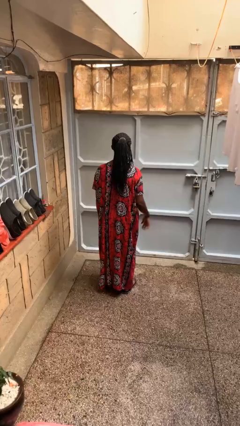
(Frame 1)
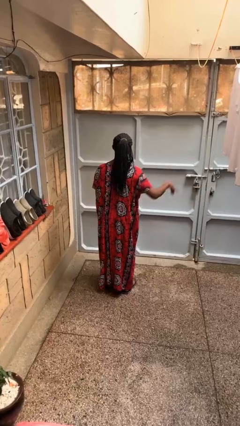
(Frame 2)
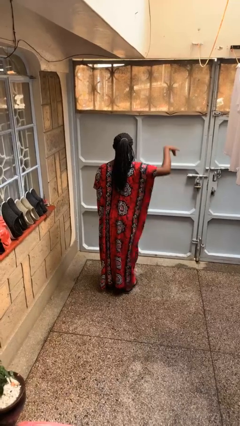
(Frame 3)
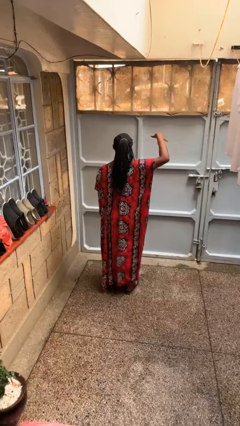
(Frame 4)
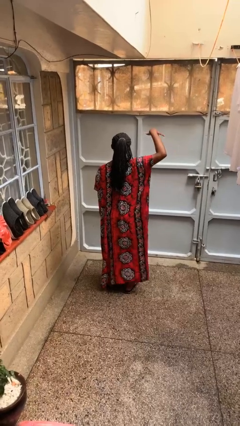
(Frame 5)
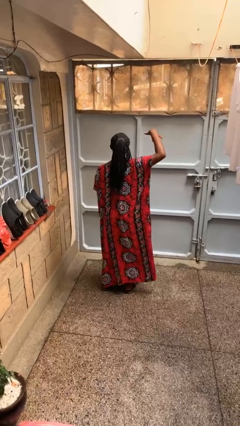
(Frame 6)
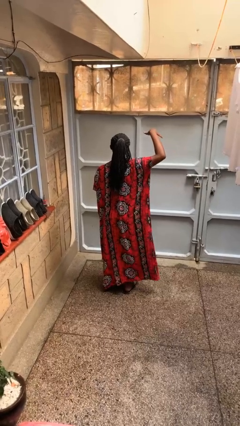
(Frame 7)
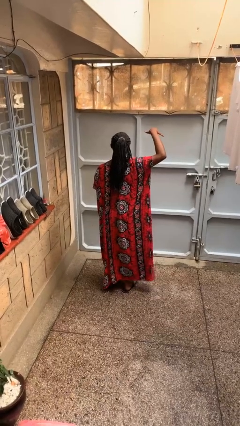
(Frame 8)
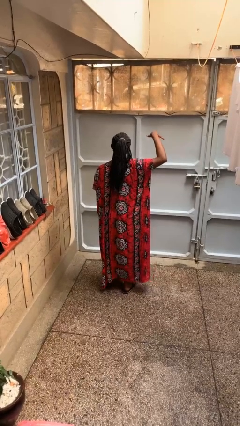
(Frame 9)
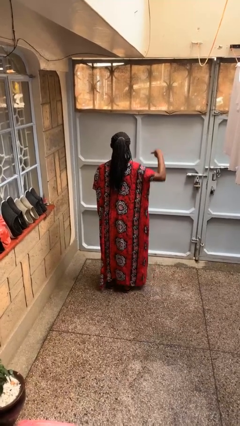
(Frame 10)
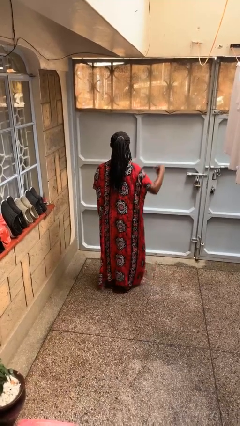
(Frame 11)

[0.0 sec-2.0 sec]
person gestures hang loose

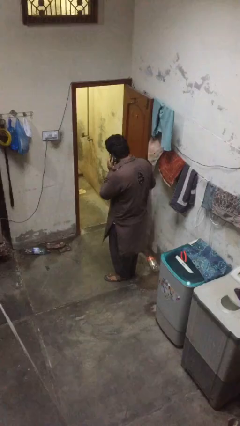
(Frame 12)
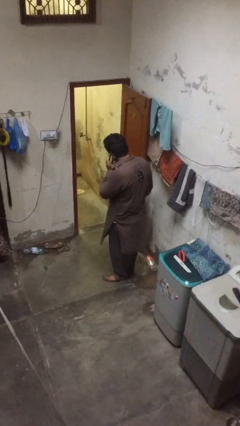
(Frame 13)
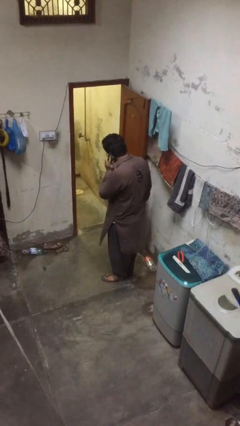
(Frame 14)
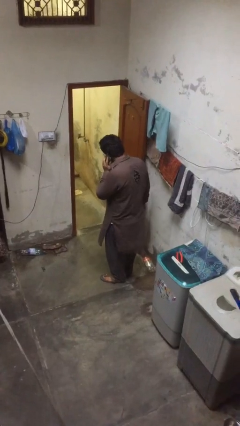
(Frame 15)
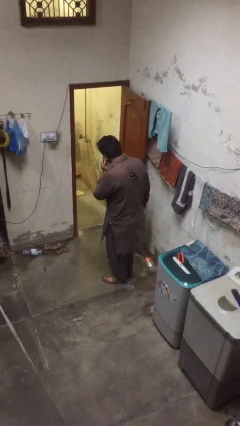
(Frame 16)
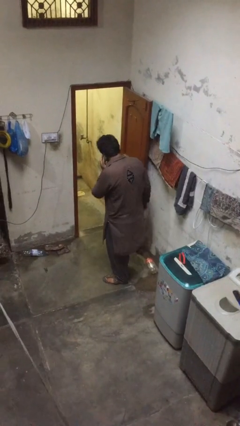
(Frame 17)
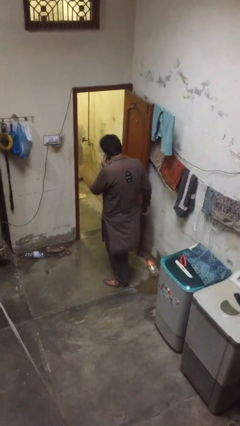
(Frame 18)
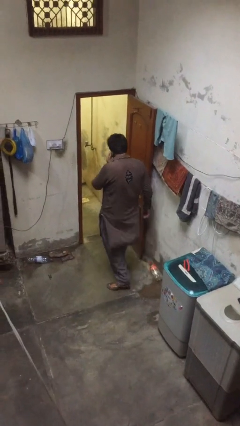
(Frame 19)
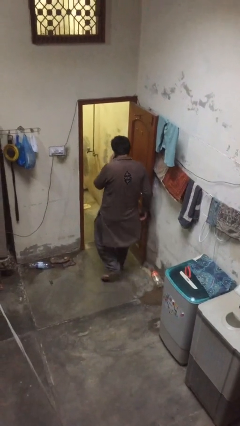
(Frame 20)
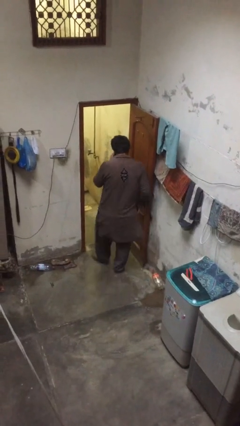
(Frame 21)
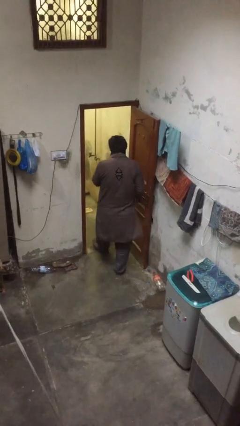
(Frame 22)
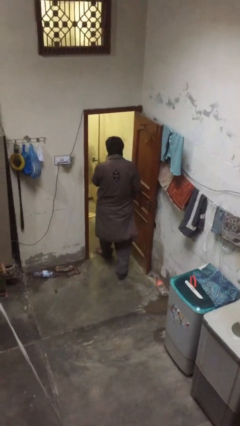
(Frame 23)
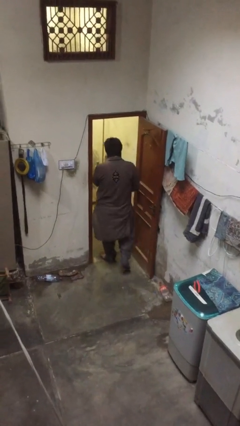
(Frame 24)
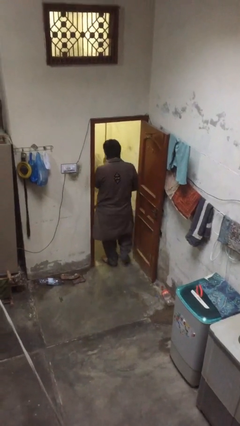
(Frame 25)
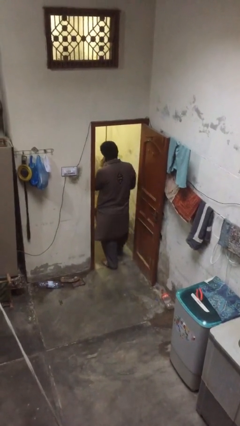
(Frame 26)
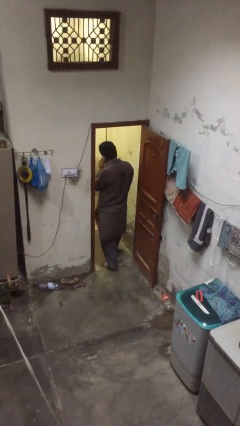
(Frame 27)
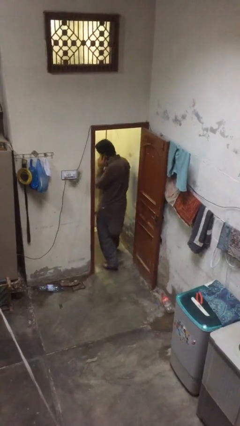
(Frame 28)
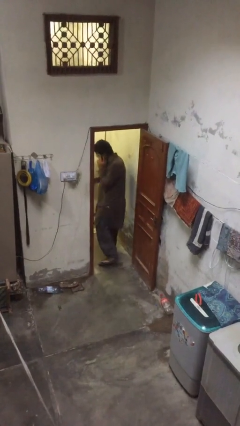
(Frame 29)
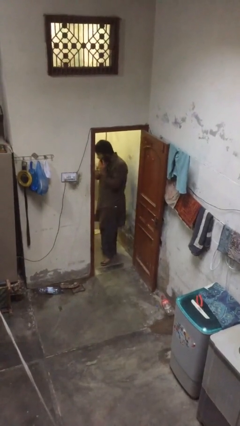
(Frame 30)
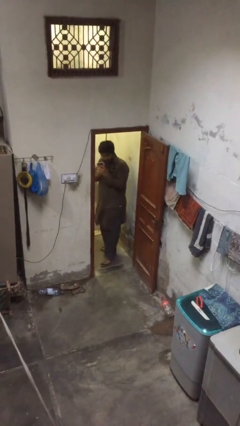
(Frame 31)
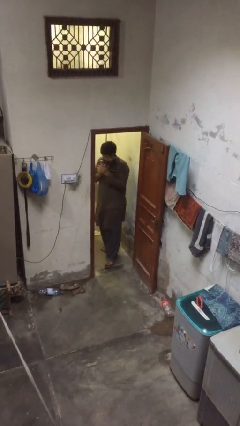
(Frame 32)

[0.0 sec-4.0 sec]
person exits scene through structure

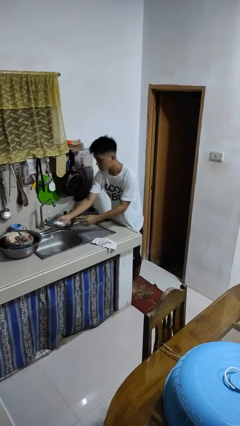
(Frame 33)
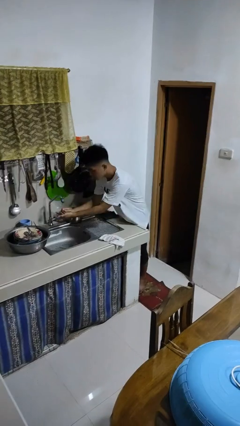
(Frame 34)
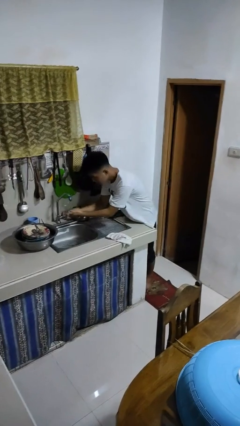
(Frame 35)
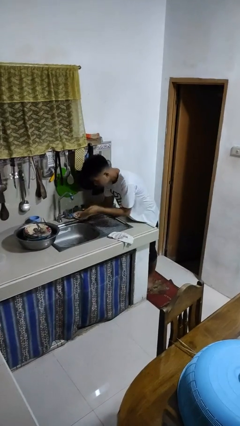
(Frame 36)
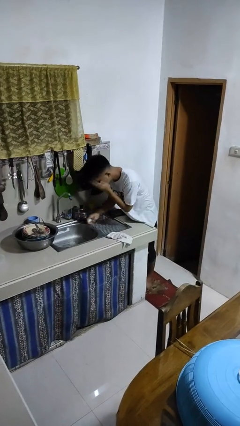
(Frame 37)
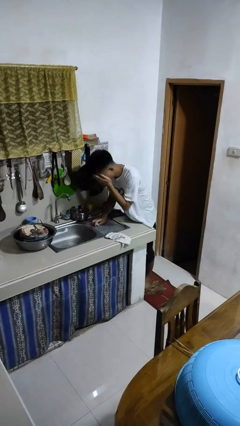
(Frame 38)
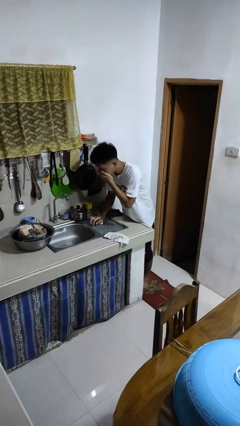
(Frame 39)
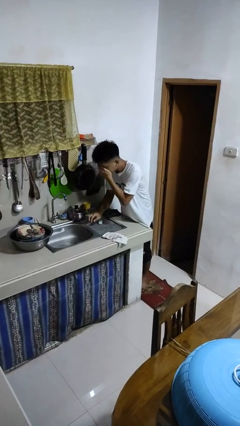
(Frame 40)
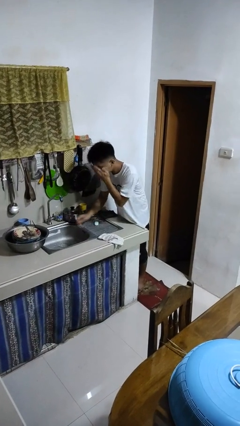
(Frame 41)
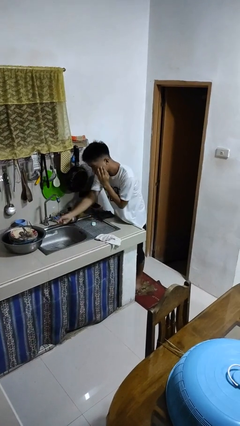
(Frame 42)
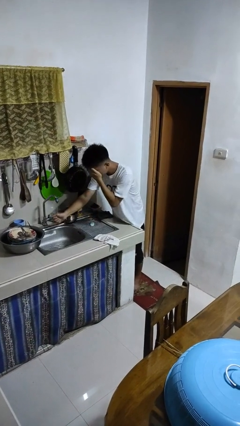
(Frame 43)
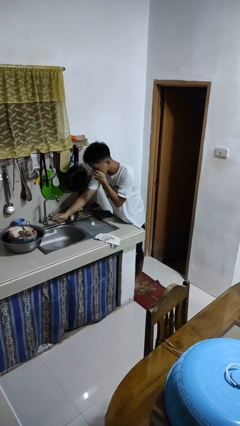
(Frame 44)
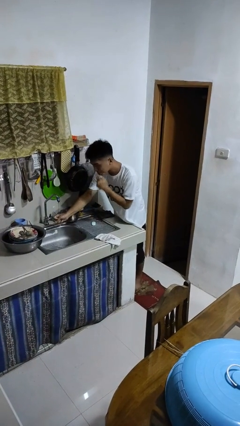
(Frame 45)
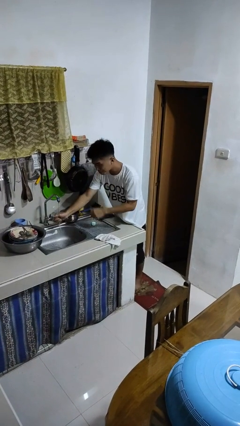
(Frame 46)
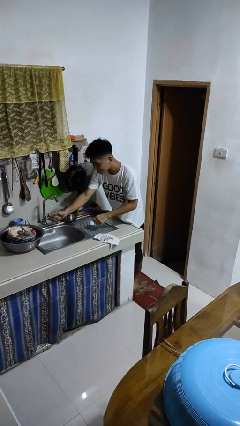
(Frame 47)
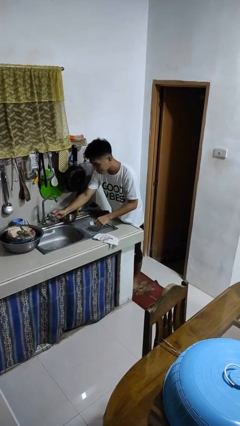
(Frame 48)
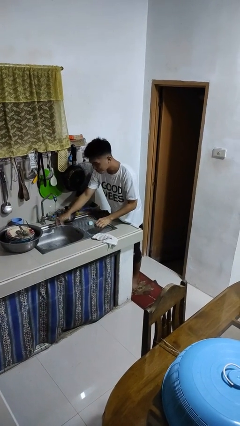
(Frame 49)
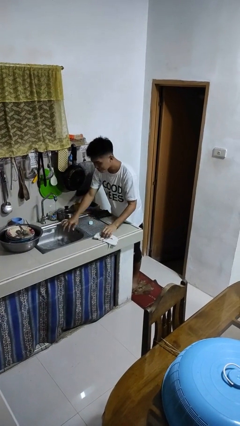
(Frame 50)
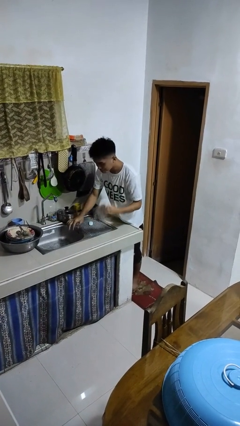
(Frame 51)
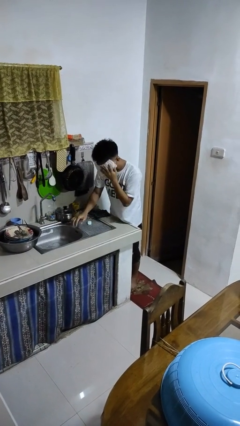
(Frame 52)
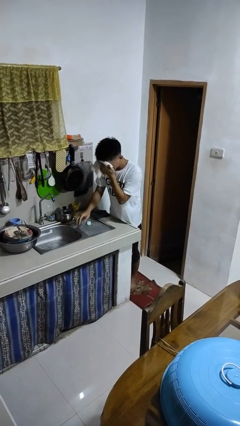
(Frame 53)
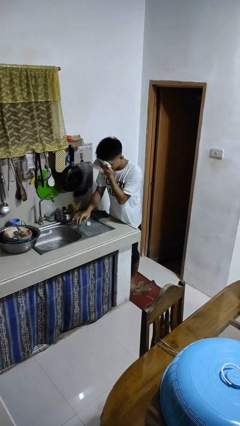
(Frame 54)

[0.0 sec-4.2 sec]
person washes face

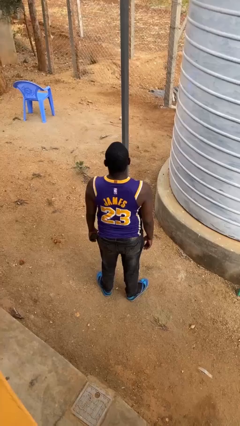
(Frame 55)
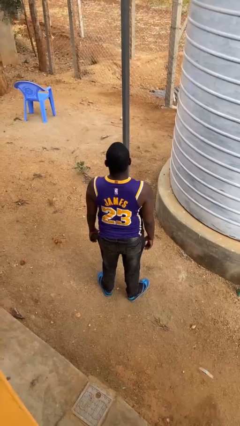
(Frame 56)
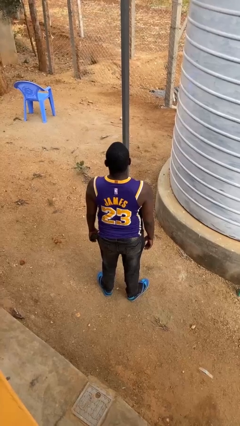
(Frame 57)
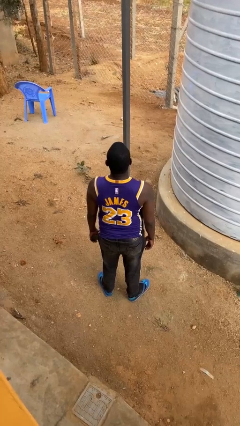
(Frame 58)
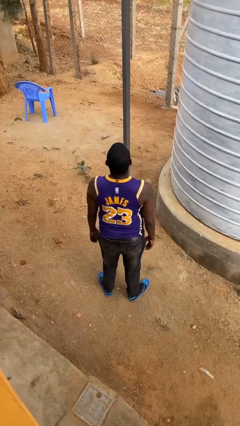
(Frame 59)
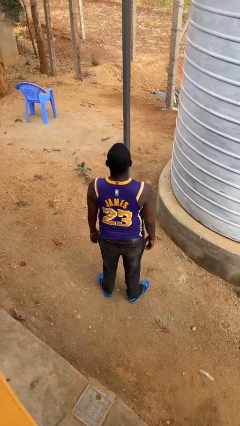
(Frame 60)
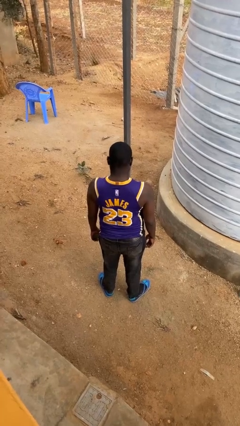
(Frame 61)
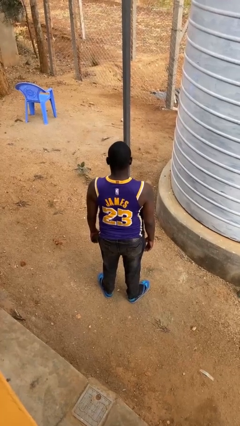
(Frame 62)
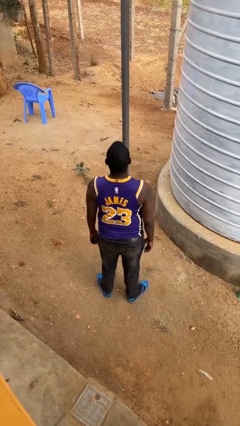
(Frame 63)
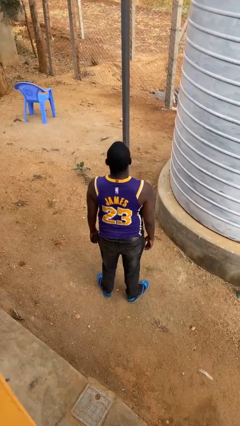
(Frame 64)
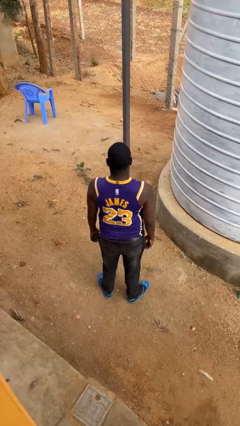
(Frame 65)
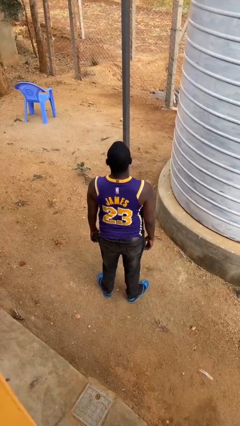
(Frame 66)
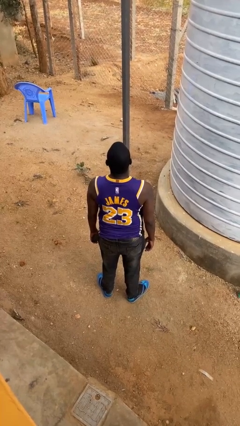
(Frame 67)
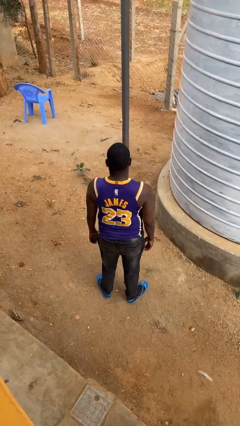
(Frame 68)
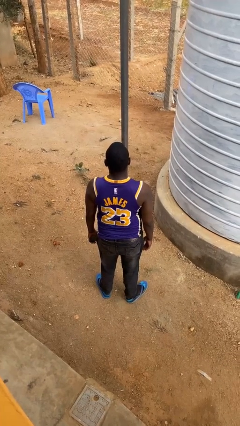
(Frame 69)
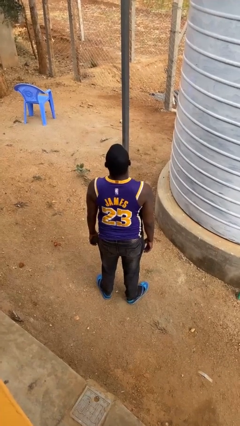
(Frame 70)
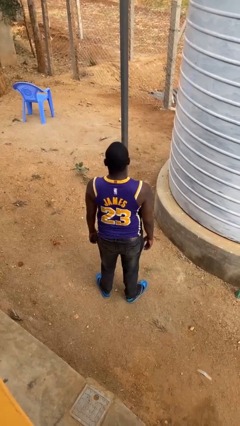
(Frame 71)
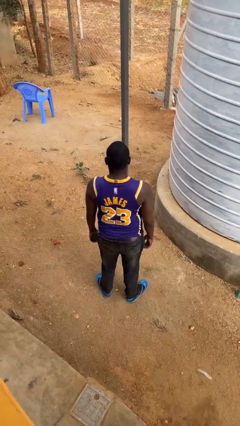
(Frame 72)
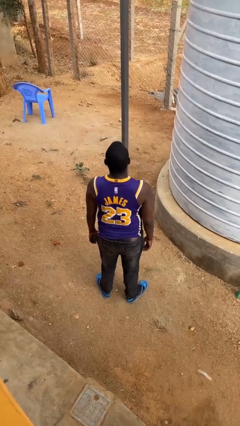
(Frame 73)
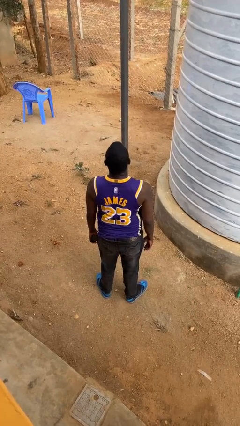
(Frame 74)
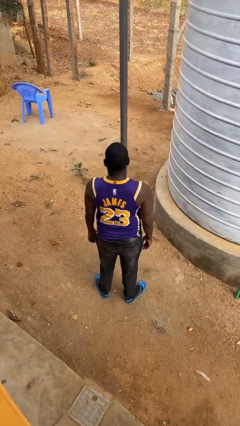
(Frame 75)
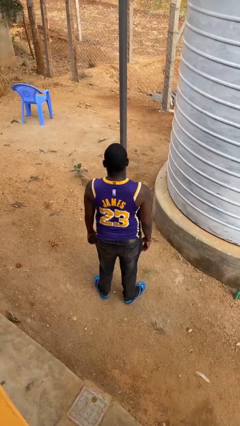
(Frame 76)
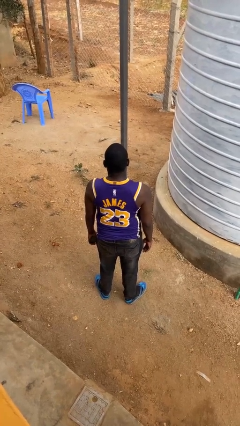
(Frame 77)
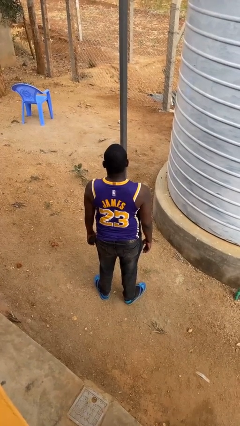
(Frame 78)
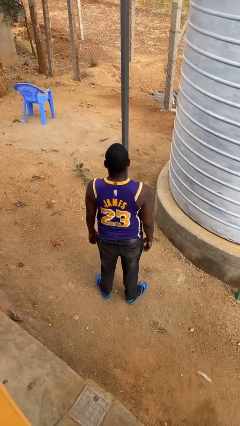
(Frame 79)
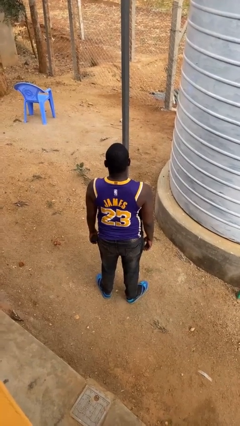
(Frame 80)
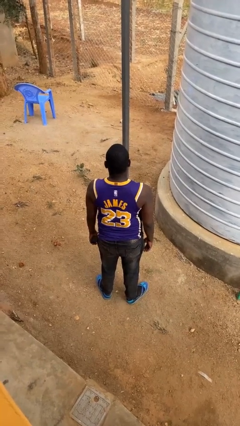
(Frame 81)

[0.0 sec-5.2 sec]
person nods head

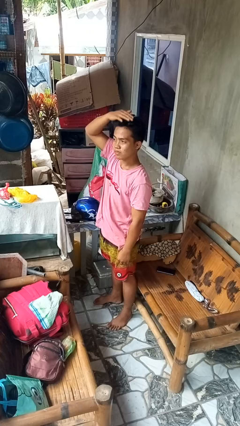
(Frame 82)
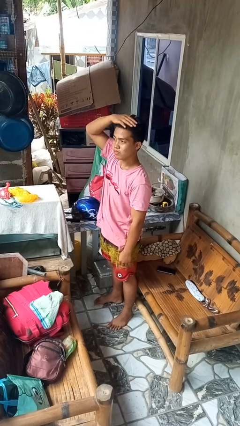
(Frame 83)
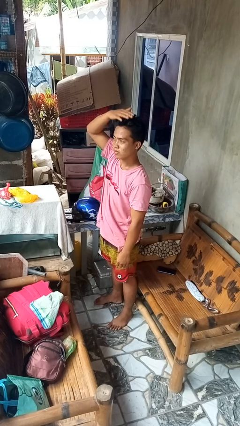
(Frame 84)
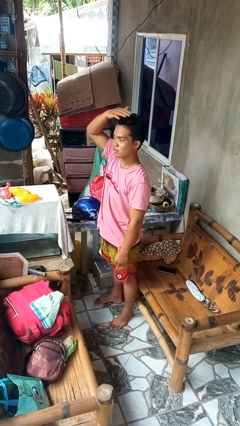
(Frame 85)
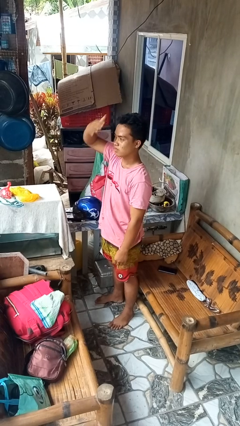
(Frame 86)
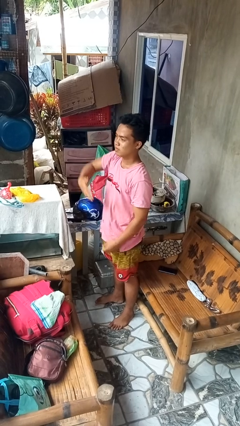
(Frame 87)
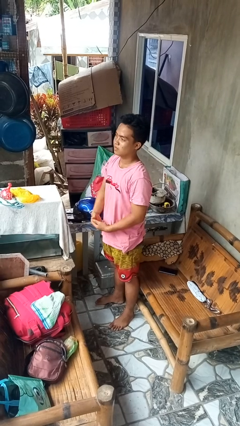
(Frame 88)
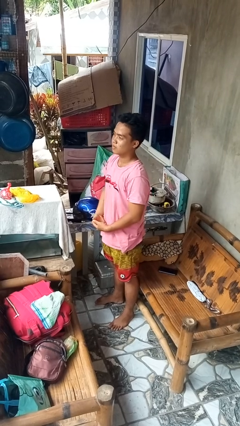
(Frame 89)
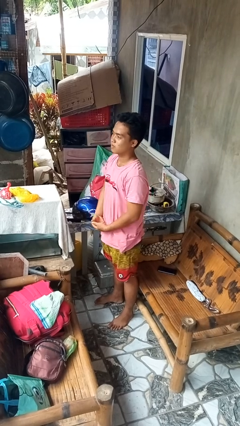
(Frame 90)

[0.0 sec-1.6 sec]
person pats head

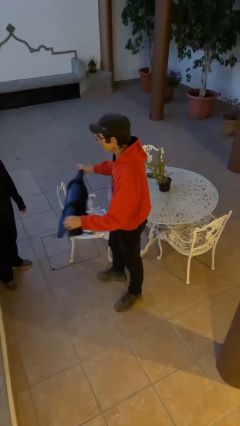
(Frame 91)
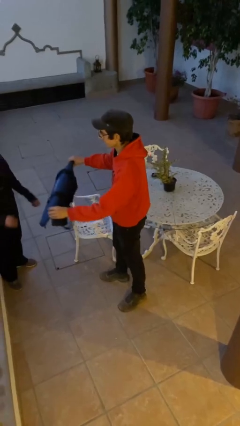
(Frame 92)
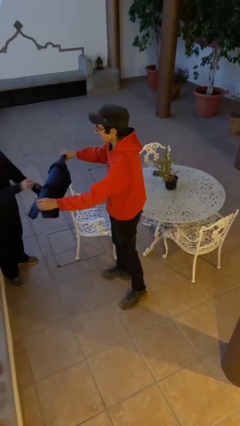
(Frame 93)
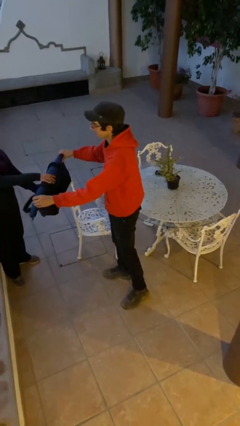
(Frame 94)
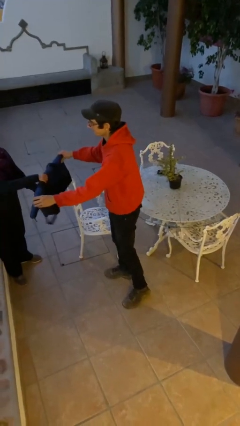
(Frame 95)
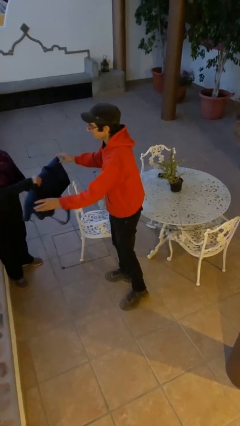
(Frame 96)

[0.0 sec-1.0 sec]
person transfers object to person
